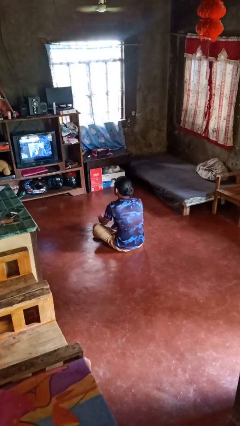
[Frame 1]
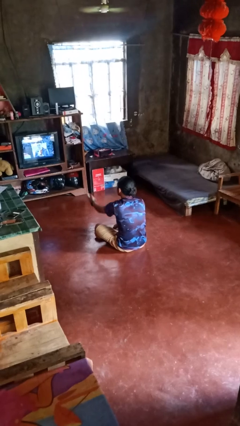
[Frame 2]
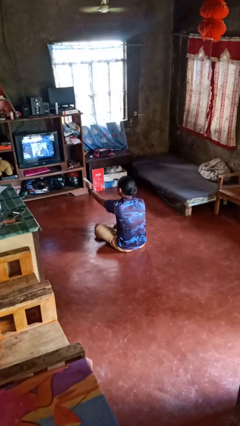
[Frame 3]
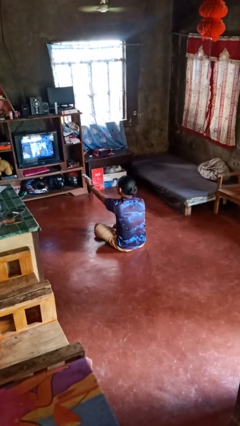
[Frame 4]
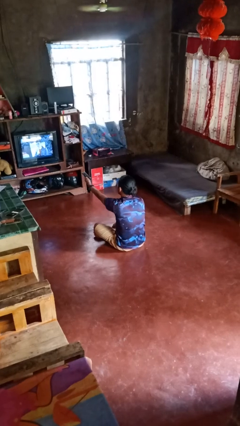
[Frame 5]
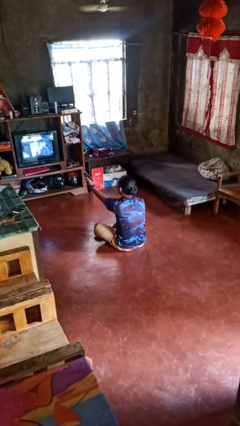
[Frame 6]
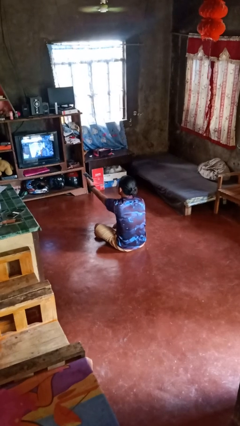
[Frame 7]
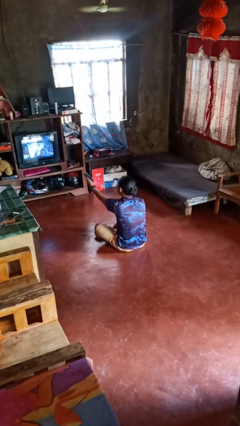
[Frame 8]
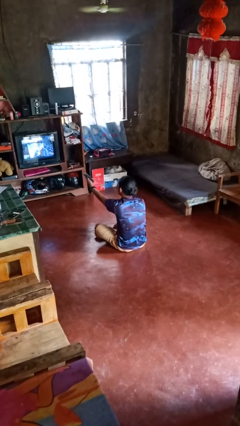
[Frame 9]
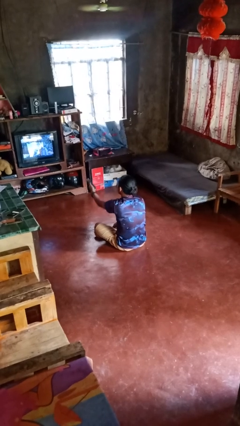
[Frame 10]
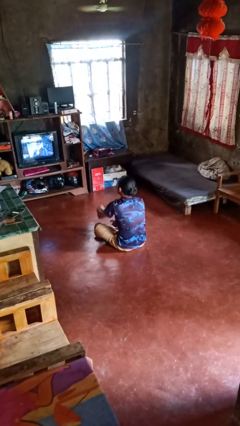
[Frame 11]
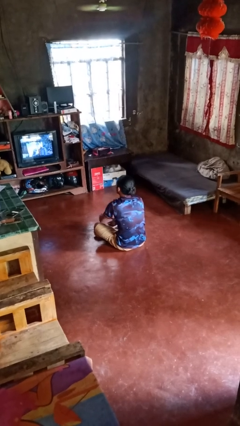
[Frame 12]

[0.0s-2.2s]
person uses television remote

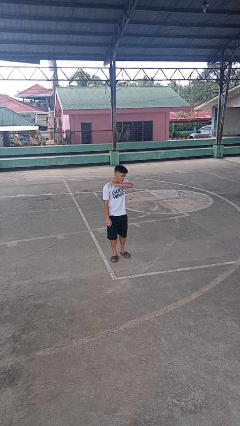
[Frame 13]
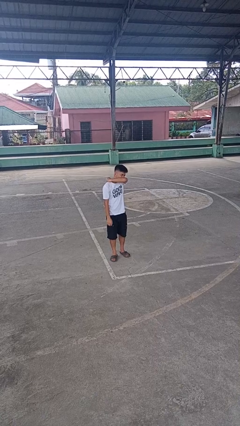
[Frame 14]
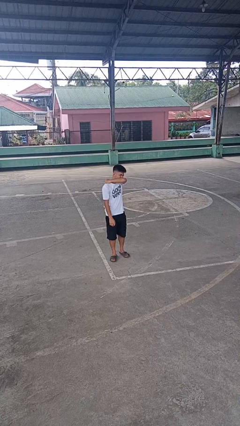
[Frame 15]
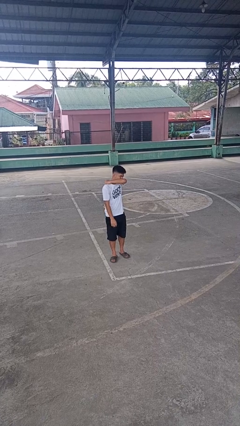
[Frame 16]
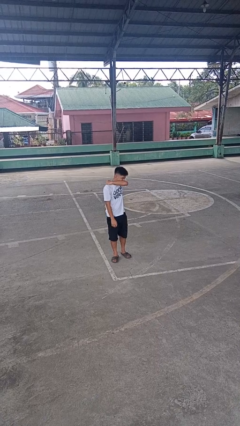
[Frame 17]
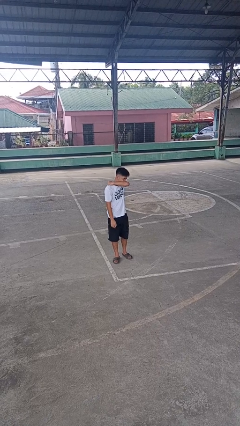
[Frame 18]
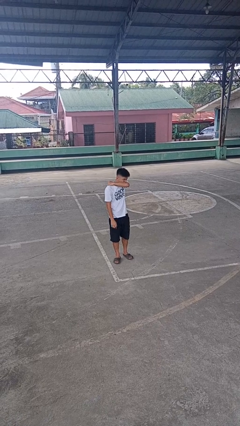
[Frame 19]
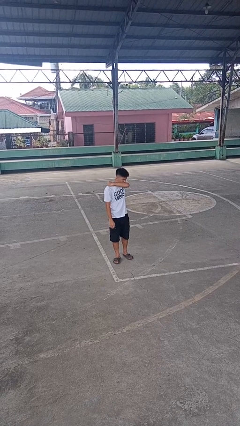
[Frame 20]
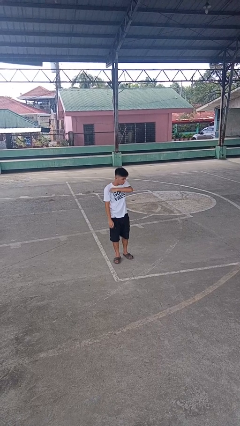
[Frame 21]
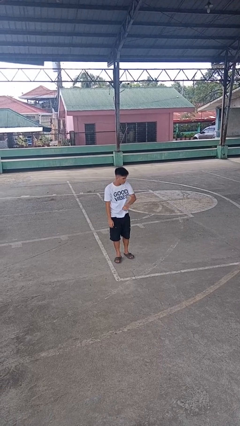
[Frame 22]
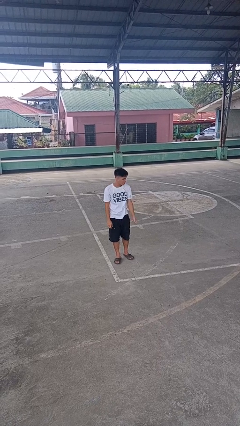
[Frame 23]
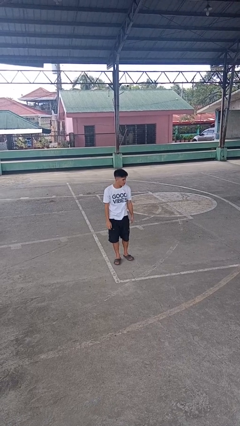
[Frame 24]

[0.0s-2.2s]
person sneezes into arm

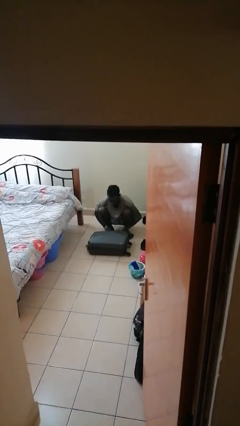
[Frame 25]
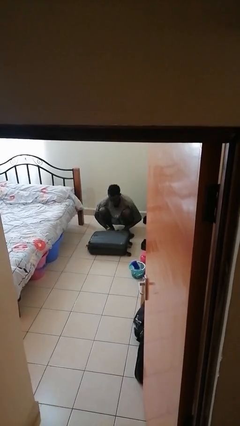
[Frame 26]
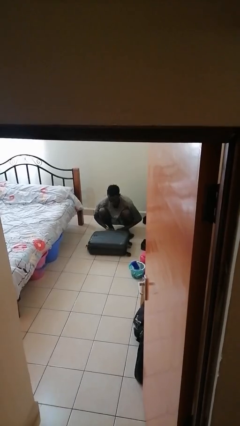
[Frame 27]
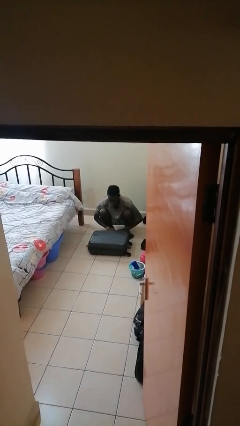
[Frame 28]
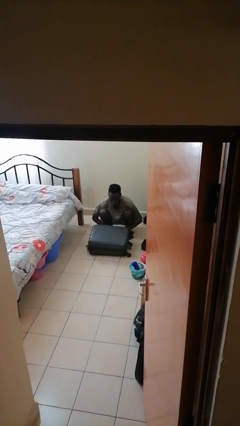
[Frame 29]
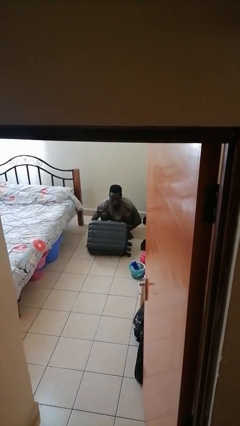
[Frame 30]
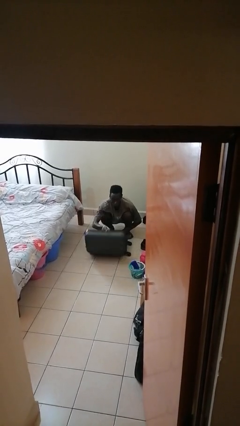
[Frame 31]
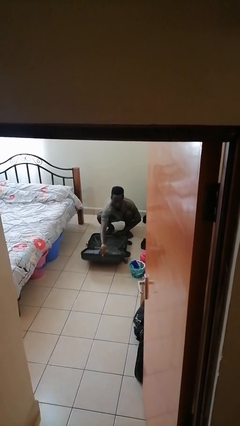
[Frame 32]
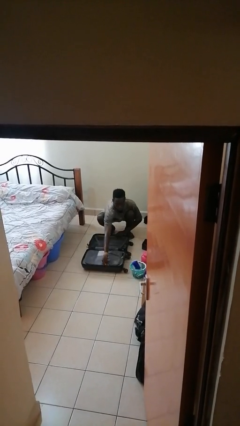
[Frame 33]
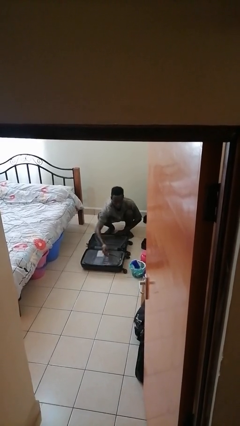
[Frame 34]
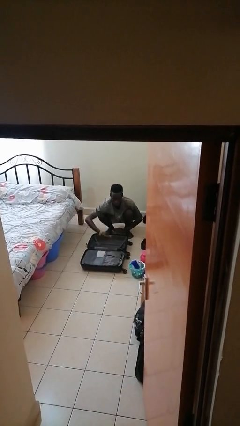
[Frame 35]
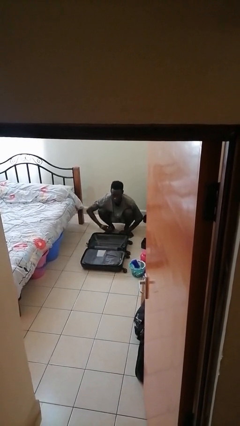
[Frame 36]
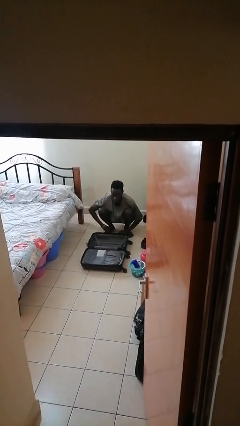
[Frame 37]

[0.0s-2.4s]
person opens suitcase

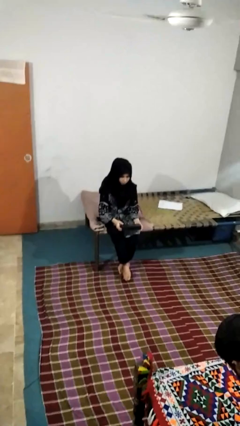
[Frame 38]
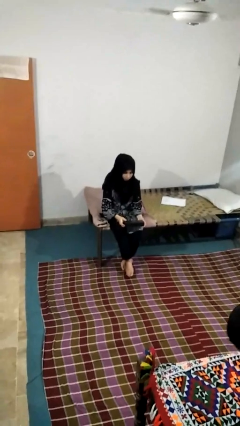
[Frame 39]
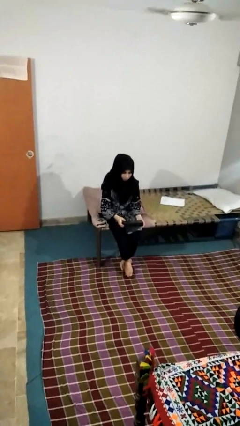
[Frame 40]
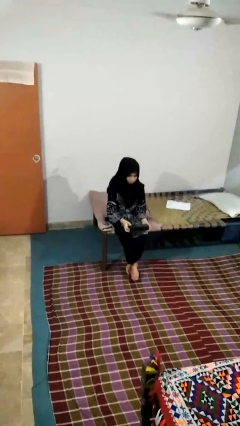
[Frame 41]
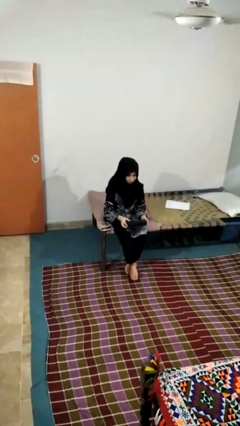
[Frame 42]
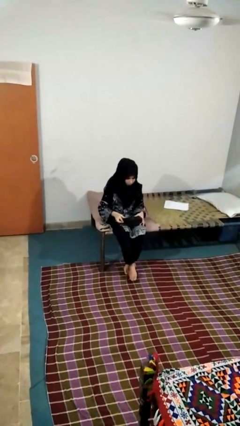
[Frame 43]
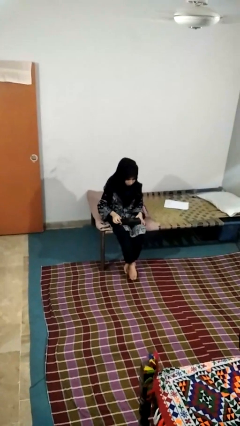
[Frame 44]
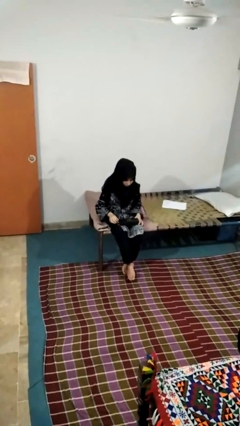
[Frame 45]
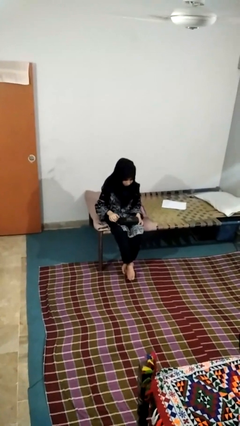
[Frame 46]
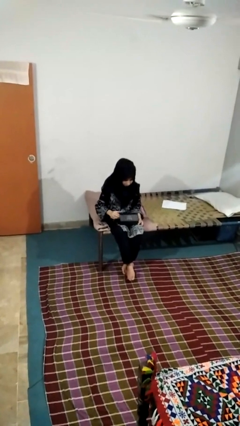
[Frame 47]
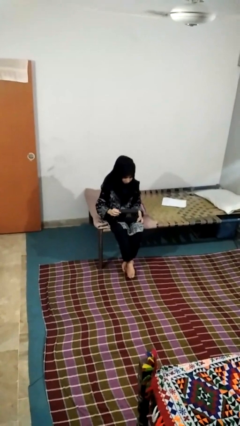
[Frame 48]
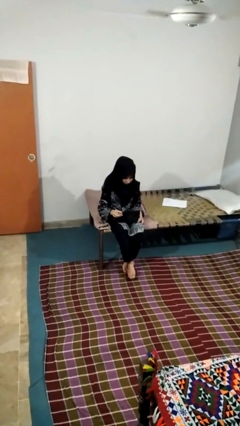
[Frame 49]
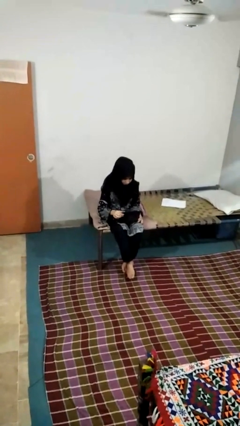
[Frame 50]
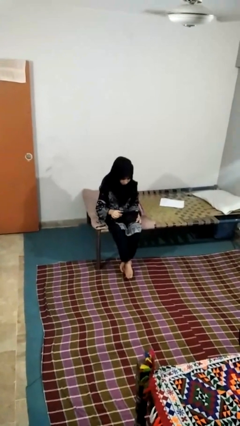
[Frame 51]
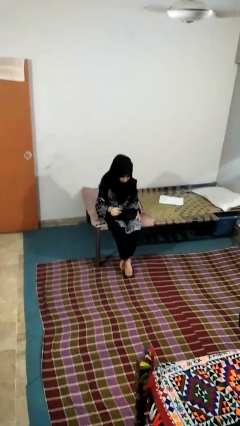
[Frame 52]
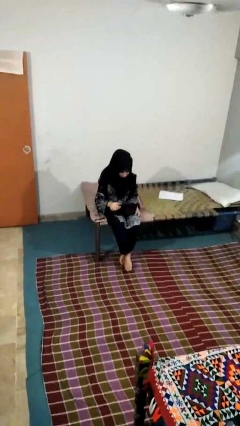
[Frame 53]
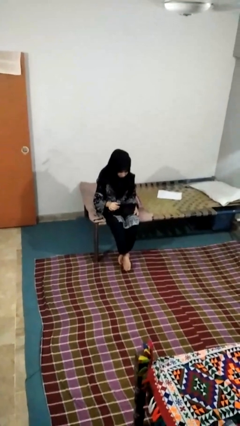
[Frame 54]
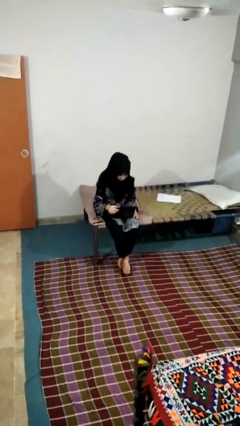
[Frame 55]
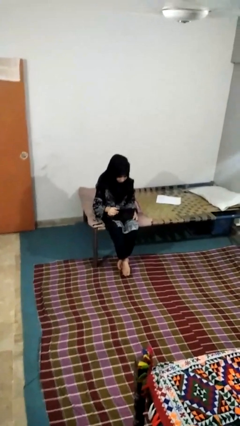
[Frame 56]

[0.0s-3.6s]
person opens jewelry box

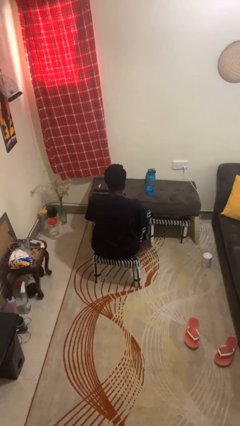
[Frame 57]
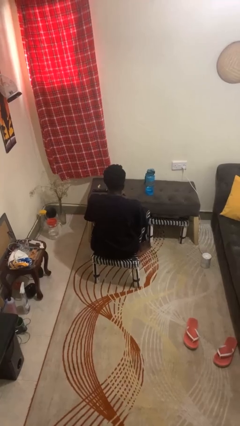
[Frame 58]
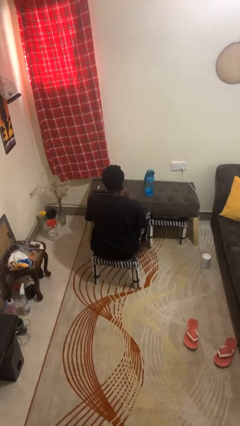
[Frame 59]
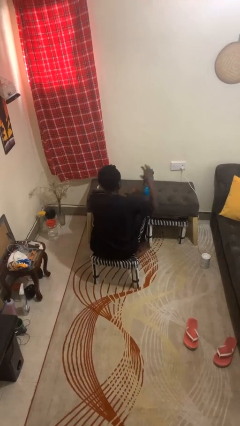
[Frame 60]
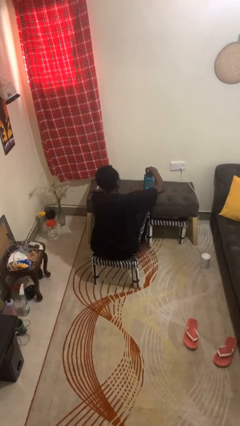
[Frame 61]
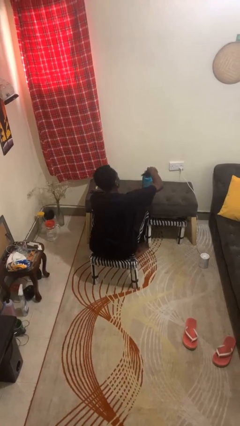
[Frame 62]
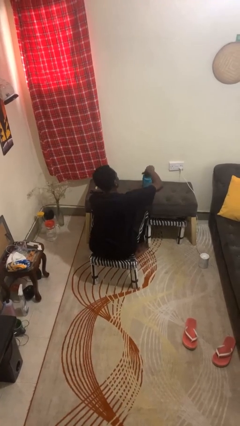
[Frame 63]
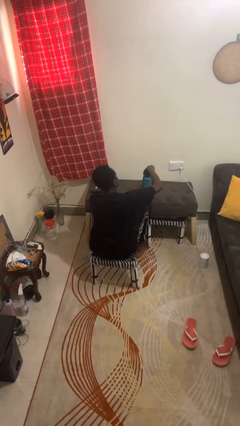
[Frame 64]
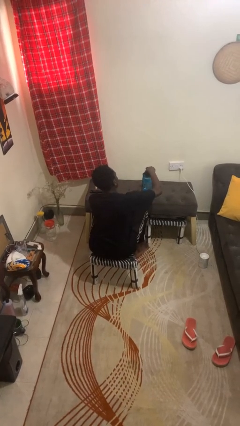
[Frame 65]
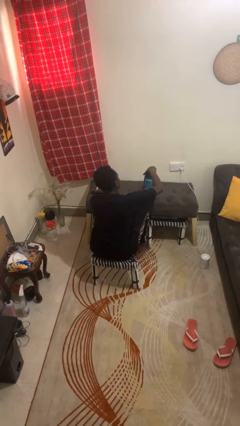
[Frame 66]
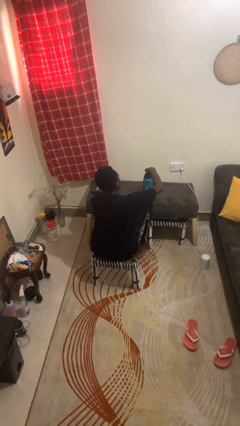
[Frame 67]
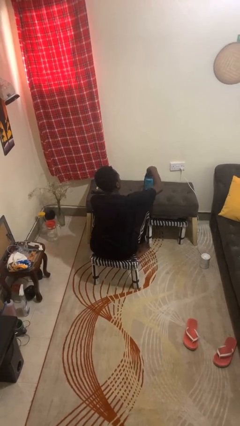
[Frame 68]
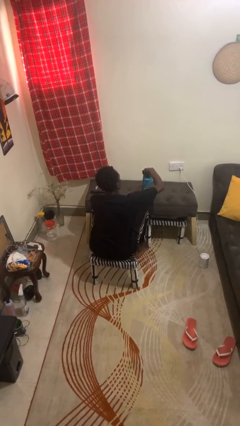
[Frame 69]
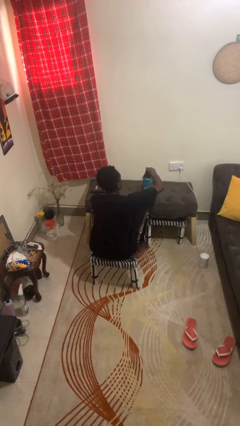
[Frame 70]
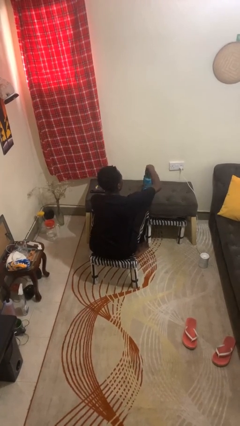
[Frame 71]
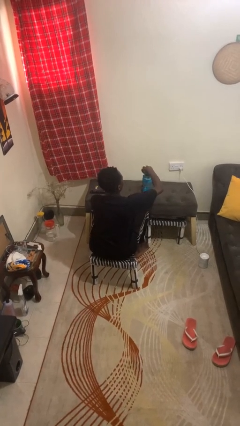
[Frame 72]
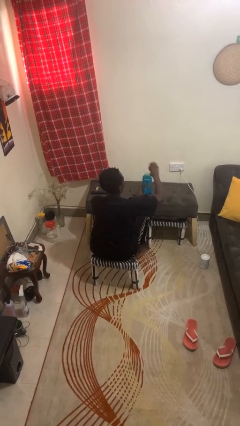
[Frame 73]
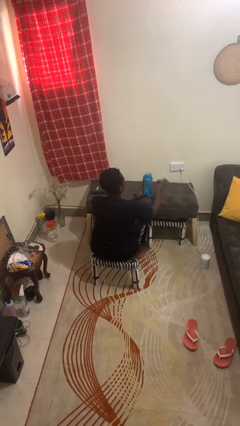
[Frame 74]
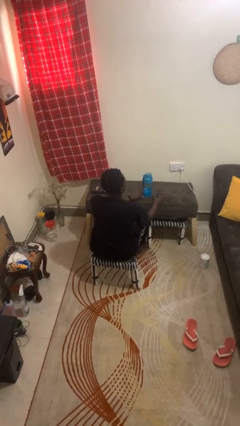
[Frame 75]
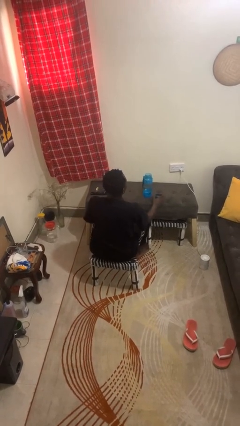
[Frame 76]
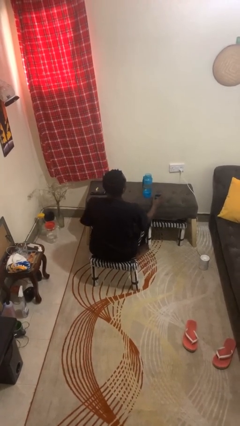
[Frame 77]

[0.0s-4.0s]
person opens jar

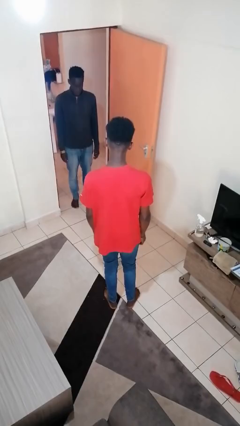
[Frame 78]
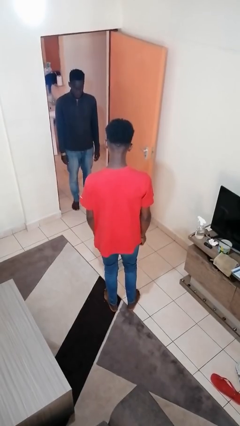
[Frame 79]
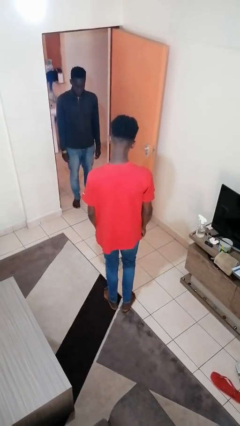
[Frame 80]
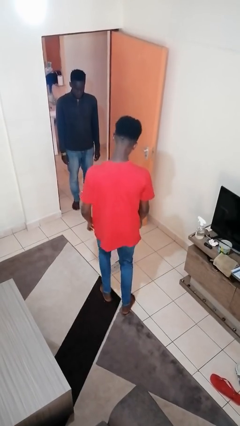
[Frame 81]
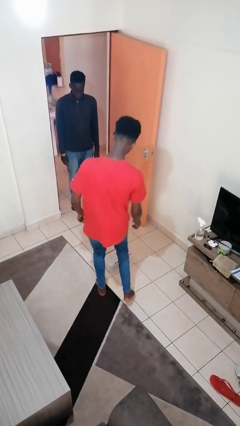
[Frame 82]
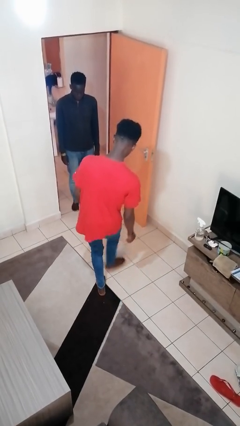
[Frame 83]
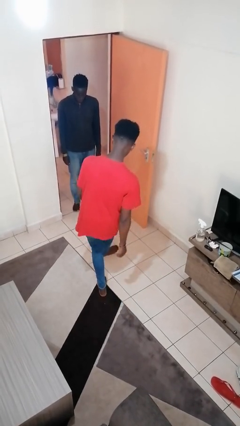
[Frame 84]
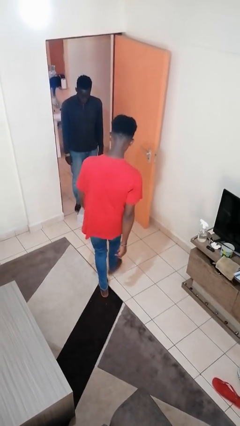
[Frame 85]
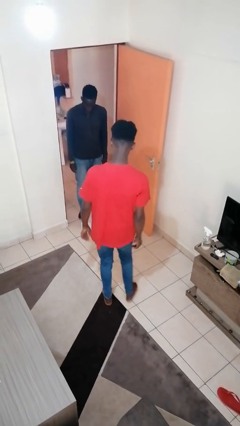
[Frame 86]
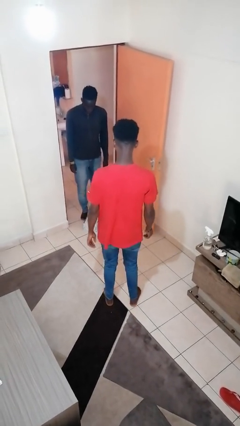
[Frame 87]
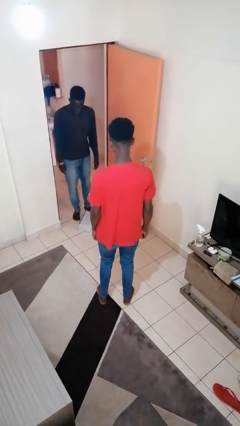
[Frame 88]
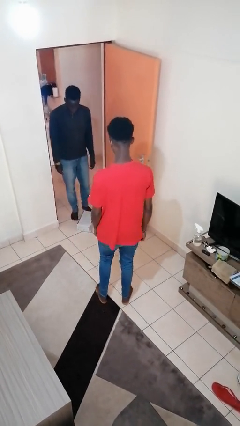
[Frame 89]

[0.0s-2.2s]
person kicks object to person

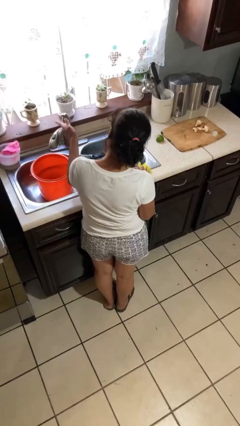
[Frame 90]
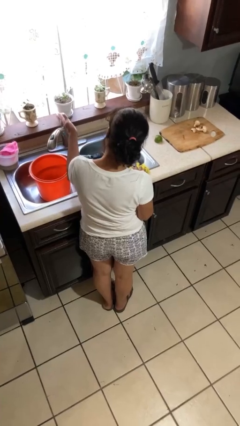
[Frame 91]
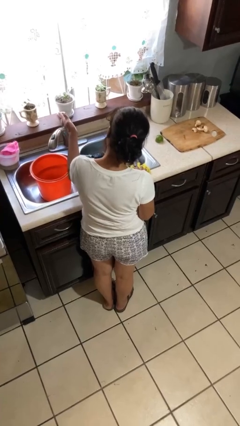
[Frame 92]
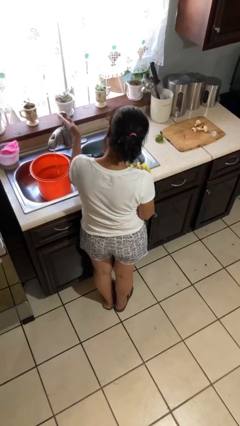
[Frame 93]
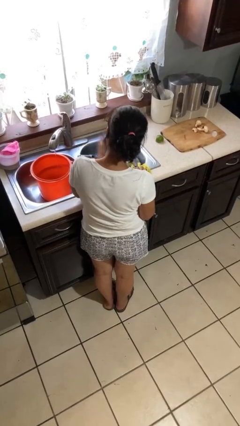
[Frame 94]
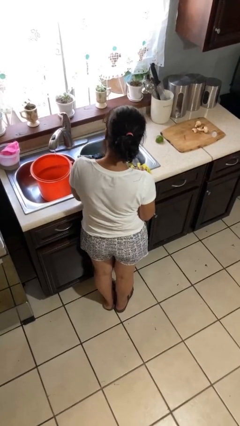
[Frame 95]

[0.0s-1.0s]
person turns on faucet
